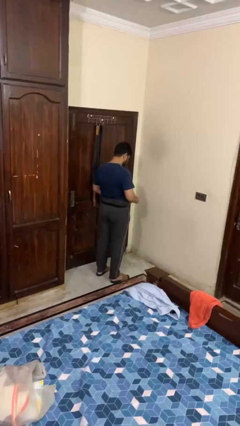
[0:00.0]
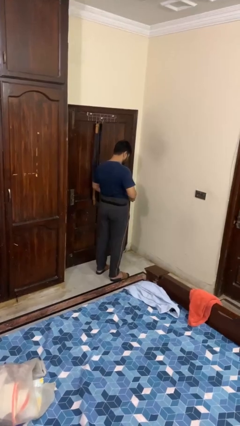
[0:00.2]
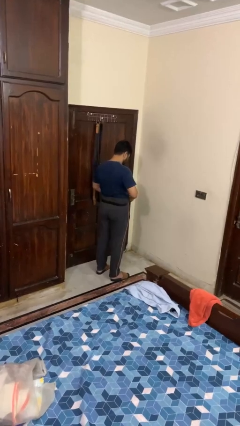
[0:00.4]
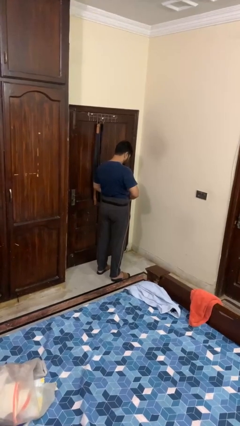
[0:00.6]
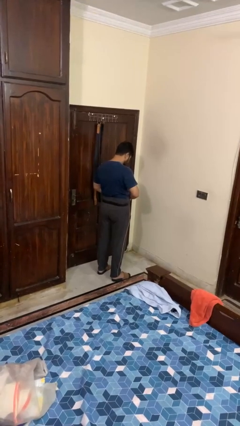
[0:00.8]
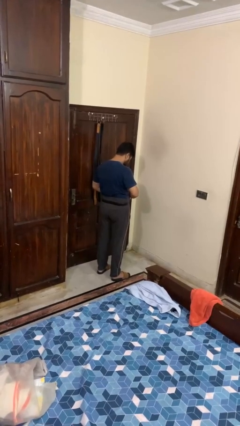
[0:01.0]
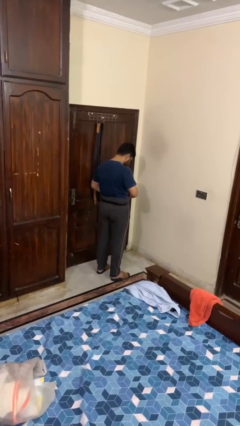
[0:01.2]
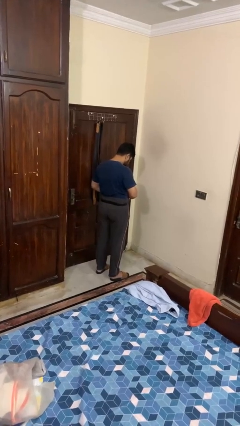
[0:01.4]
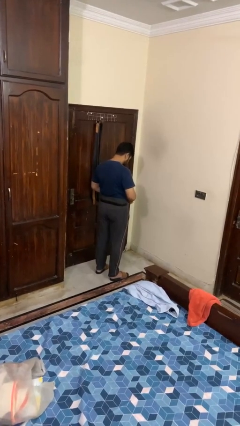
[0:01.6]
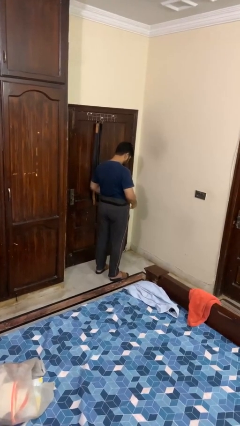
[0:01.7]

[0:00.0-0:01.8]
person puts on belt

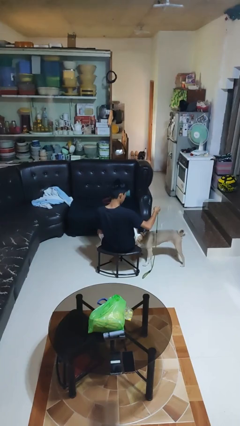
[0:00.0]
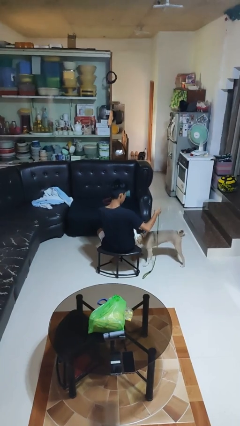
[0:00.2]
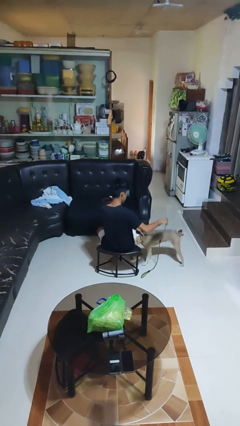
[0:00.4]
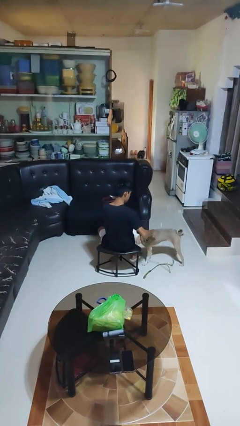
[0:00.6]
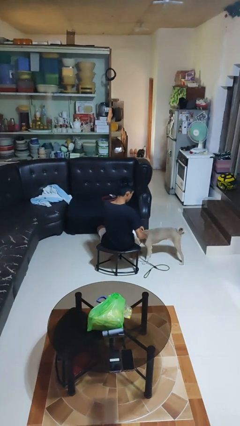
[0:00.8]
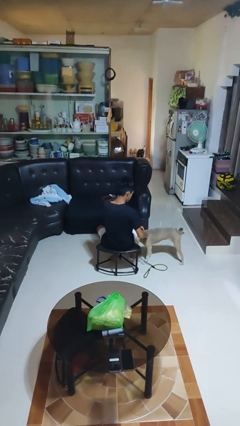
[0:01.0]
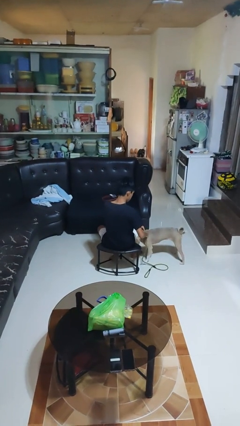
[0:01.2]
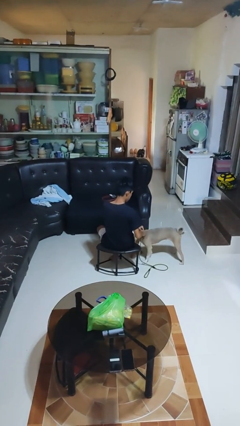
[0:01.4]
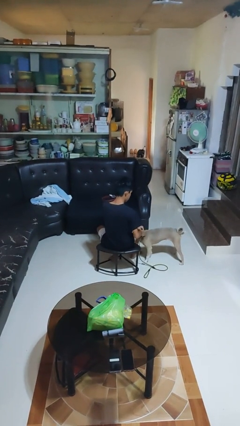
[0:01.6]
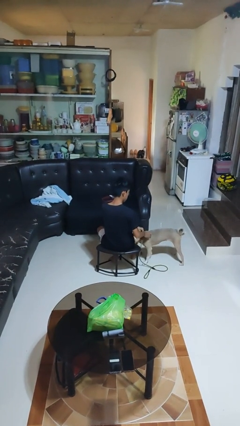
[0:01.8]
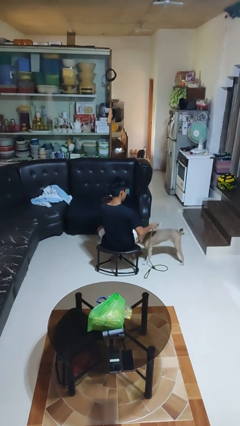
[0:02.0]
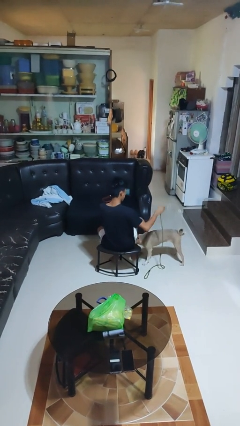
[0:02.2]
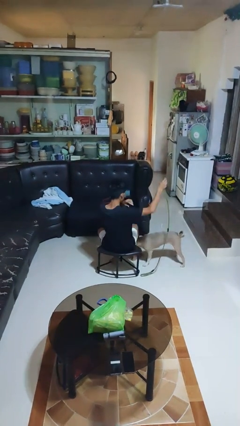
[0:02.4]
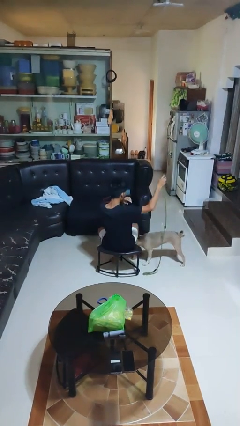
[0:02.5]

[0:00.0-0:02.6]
person unattaches leash from dog

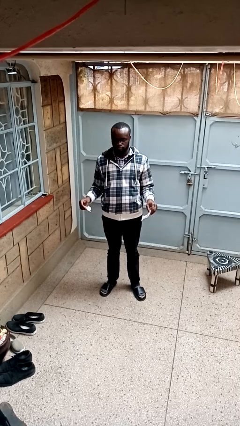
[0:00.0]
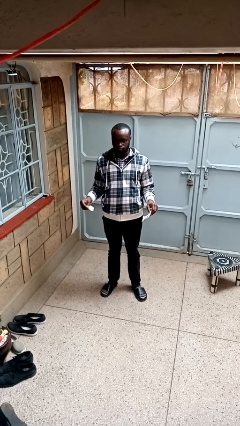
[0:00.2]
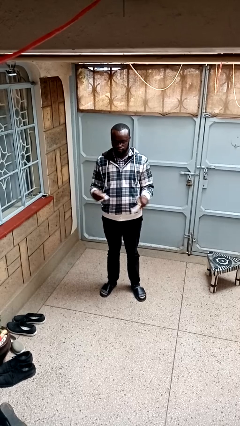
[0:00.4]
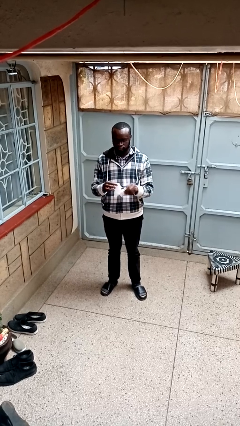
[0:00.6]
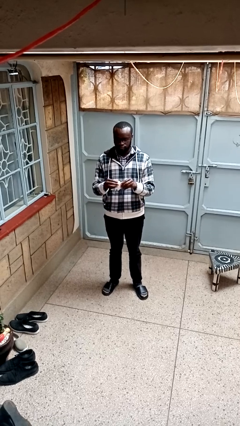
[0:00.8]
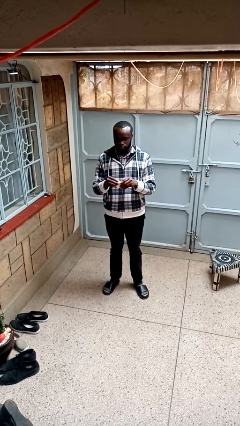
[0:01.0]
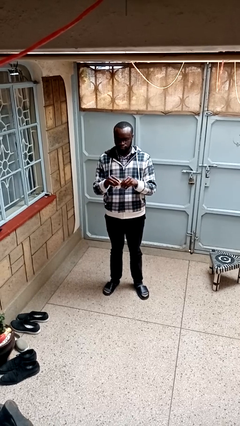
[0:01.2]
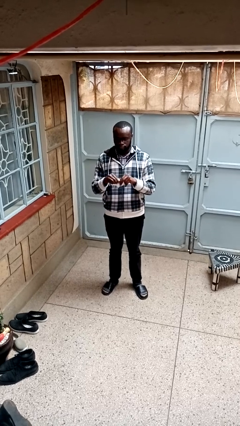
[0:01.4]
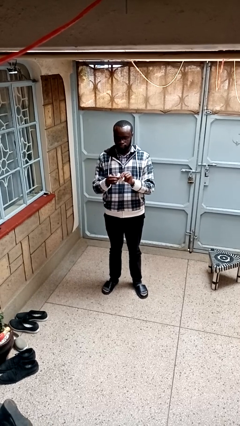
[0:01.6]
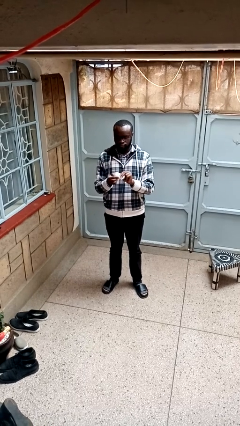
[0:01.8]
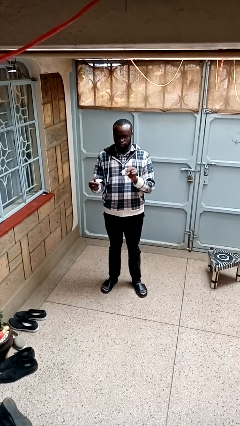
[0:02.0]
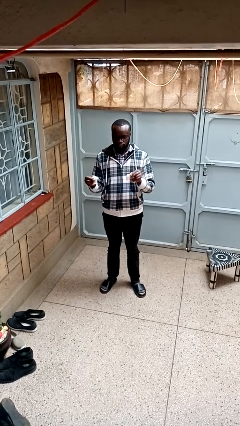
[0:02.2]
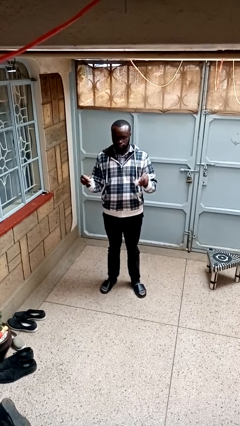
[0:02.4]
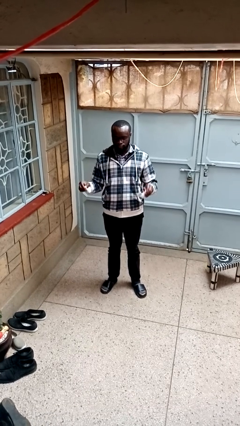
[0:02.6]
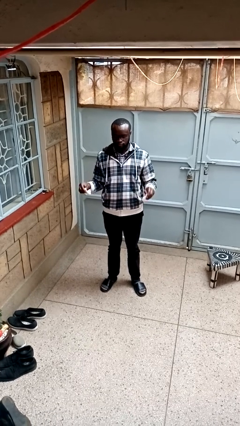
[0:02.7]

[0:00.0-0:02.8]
person tears paper

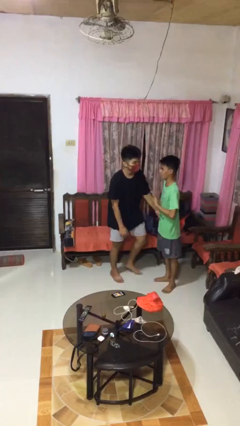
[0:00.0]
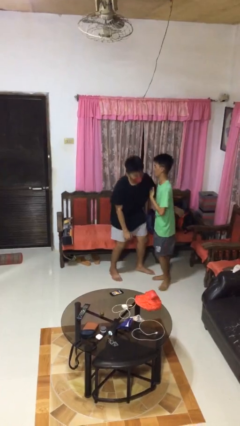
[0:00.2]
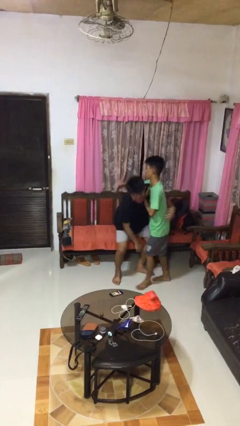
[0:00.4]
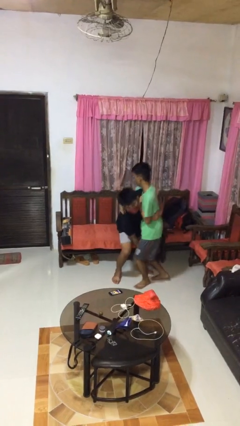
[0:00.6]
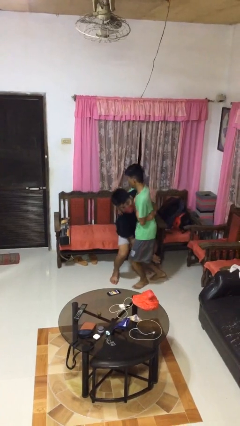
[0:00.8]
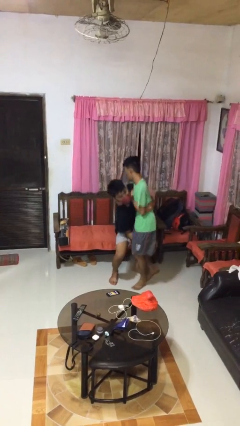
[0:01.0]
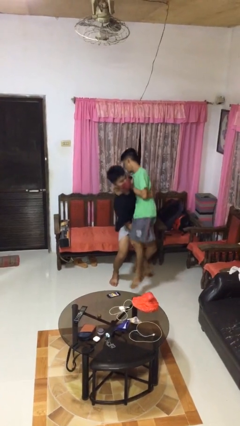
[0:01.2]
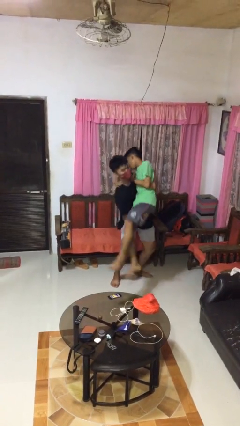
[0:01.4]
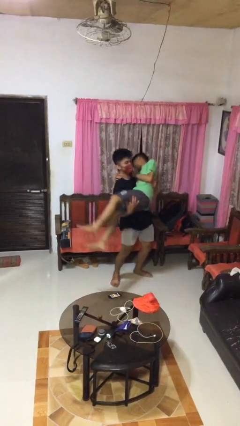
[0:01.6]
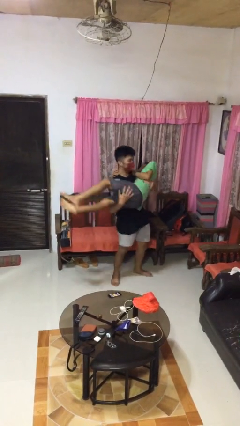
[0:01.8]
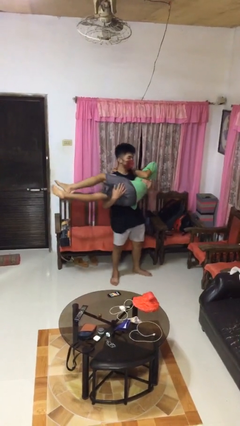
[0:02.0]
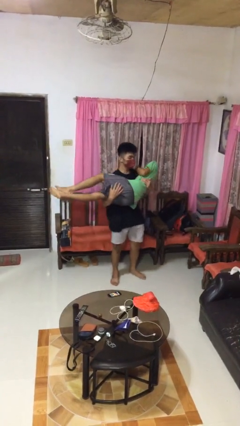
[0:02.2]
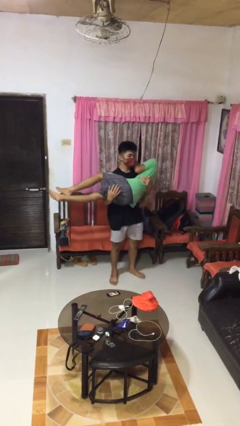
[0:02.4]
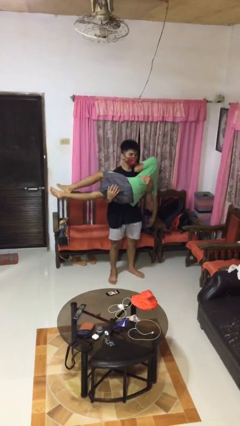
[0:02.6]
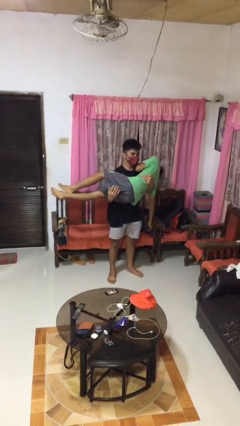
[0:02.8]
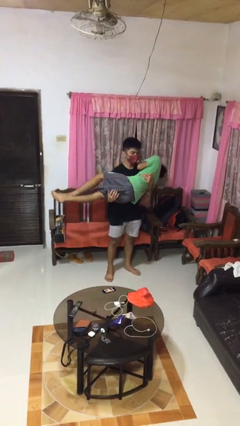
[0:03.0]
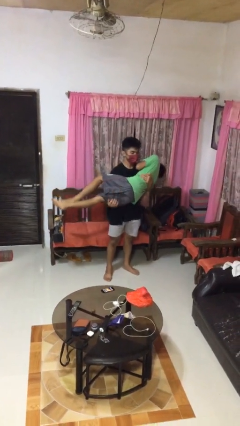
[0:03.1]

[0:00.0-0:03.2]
person picks up person

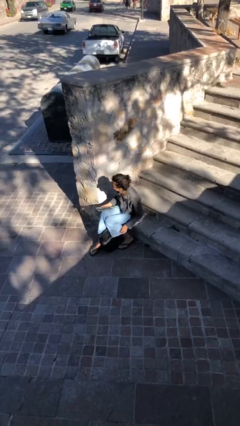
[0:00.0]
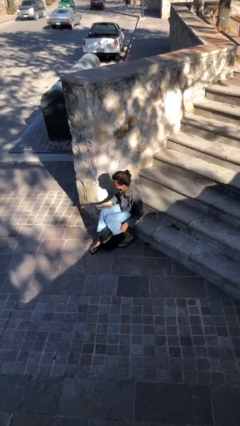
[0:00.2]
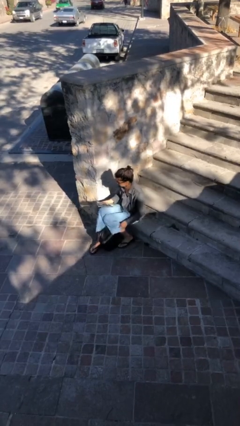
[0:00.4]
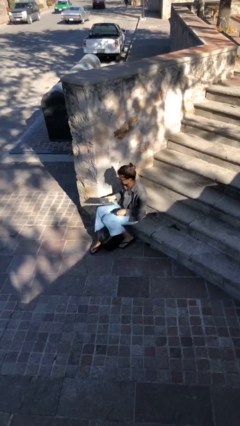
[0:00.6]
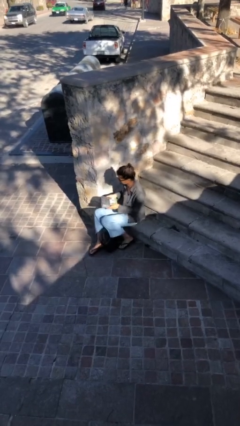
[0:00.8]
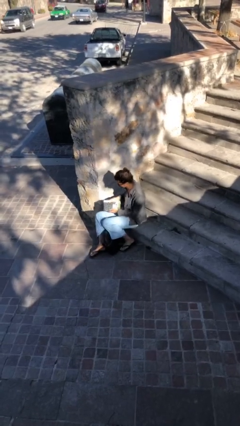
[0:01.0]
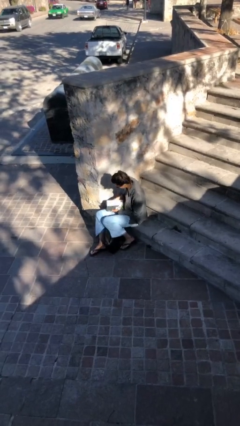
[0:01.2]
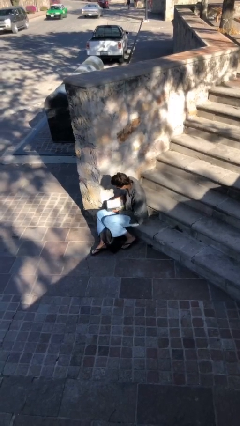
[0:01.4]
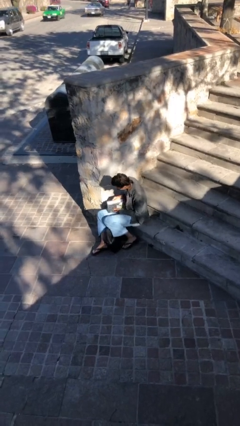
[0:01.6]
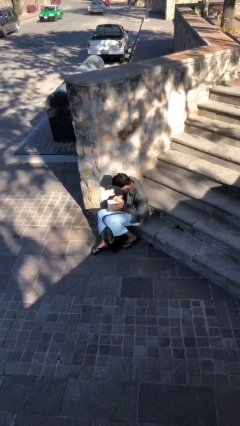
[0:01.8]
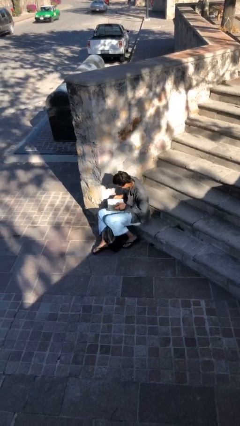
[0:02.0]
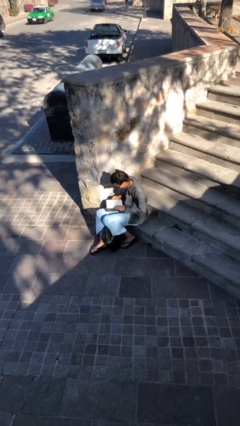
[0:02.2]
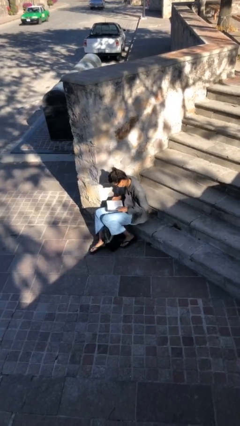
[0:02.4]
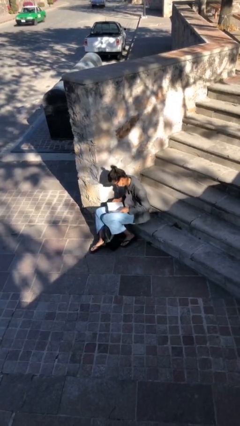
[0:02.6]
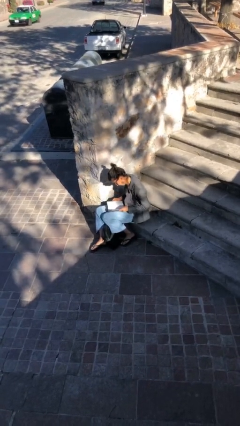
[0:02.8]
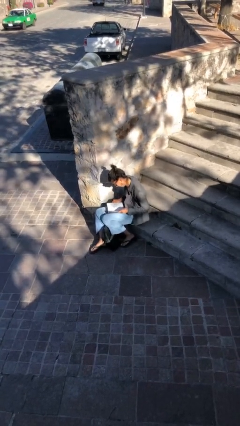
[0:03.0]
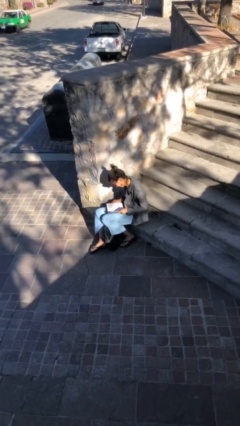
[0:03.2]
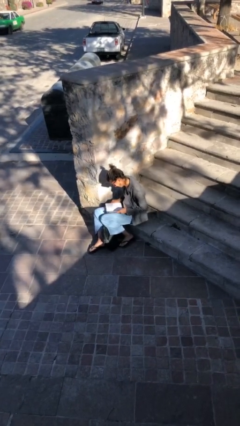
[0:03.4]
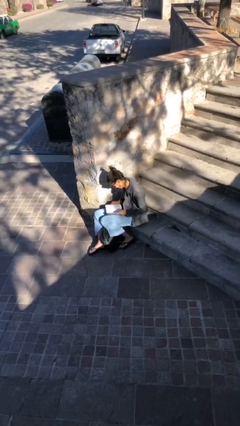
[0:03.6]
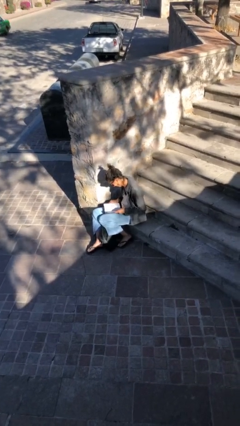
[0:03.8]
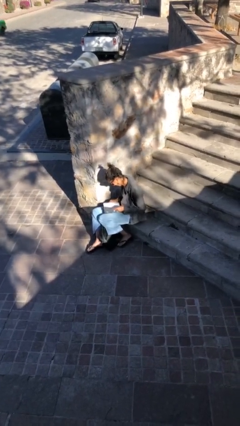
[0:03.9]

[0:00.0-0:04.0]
person reads document

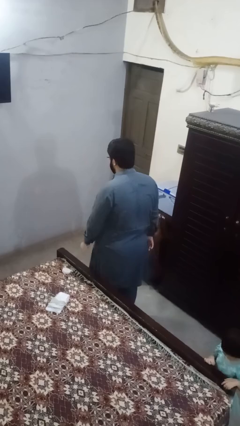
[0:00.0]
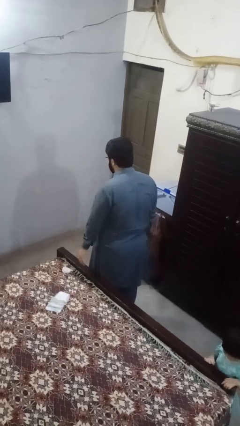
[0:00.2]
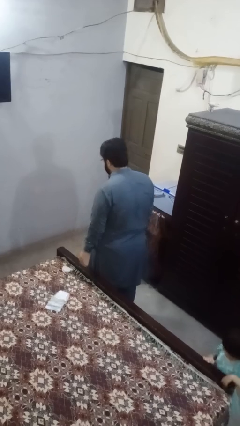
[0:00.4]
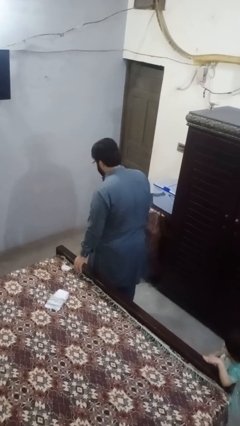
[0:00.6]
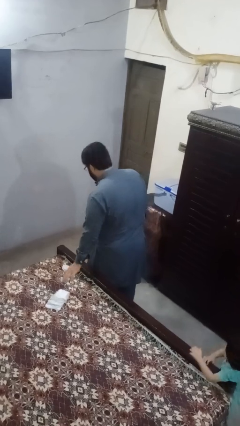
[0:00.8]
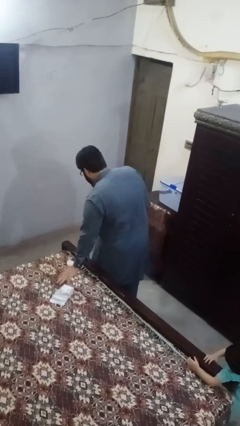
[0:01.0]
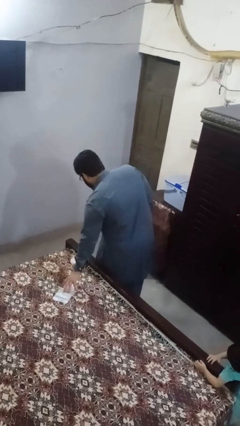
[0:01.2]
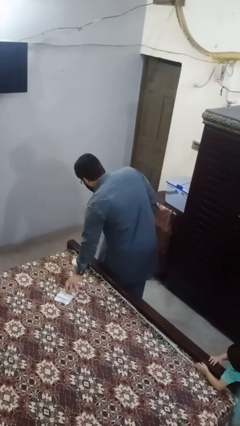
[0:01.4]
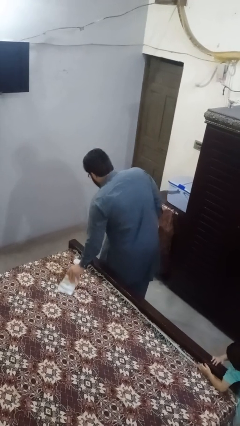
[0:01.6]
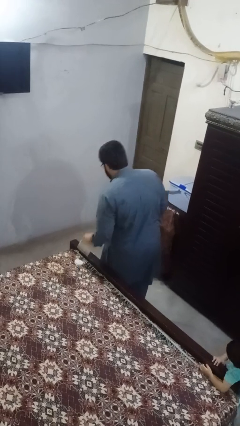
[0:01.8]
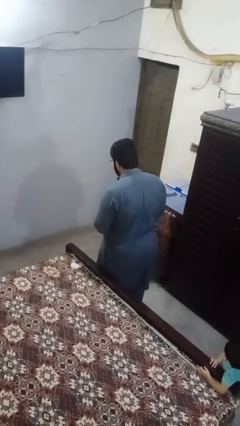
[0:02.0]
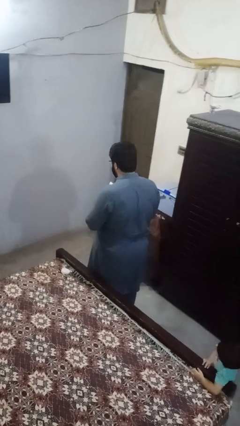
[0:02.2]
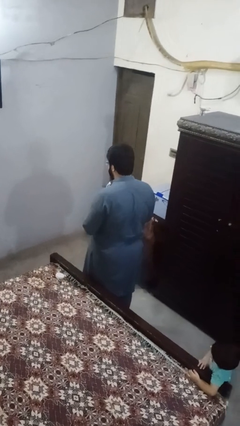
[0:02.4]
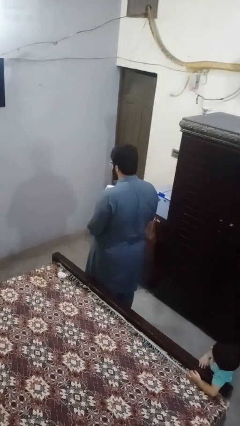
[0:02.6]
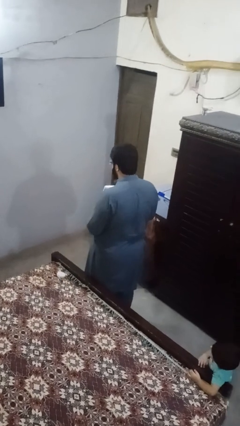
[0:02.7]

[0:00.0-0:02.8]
person picks up object from bed
